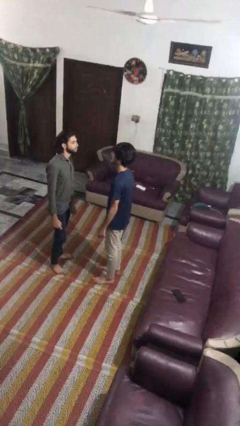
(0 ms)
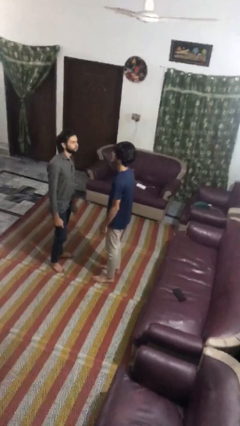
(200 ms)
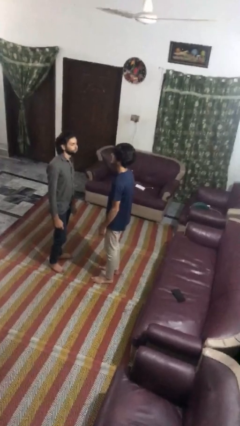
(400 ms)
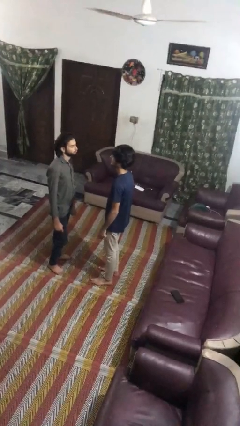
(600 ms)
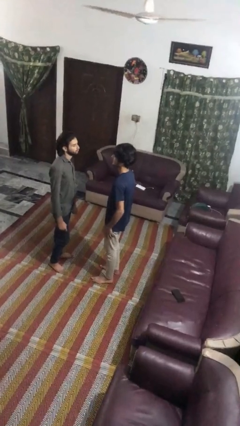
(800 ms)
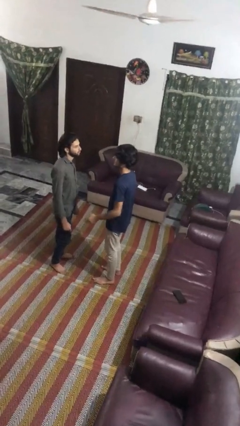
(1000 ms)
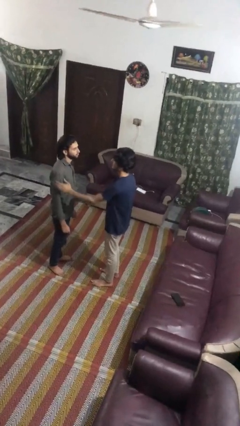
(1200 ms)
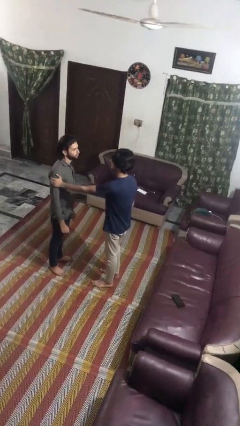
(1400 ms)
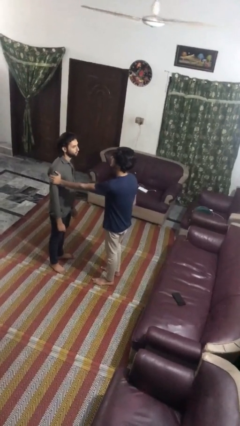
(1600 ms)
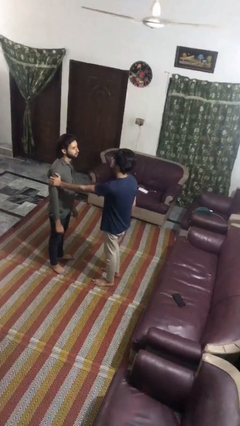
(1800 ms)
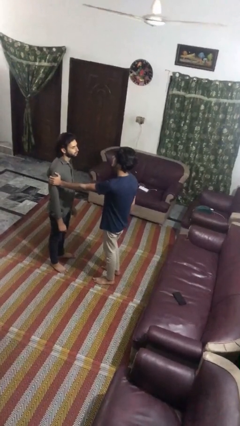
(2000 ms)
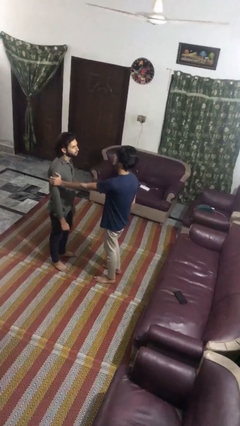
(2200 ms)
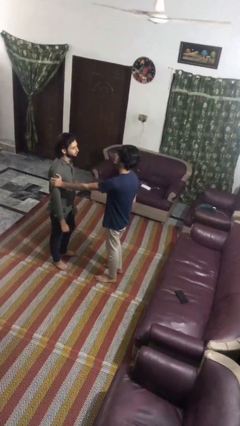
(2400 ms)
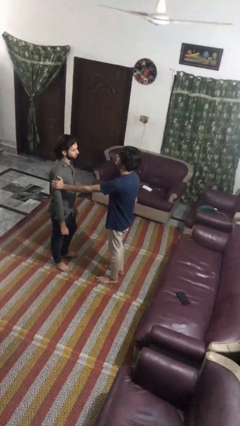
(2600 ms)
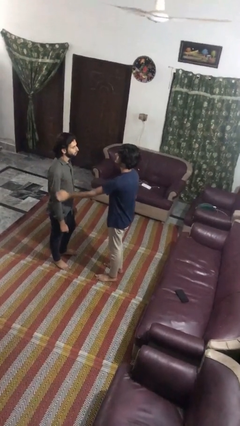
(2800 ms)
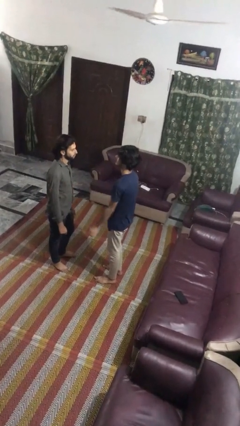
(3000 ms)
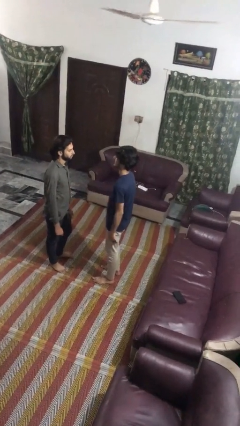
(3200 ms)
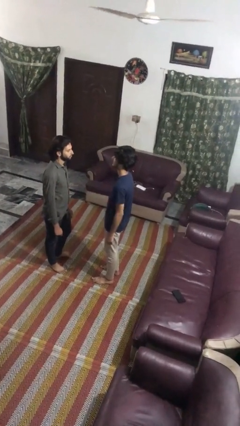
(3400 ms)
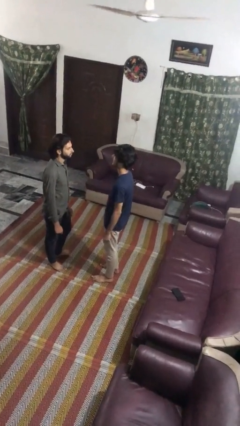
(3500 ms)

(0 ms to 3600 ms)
person grabs person by bicep

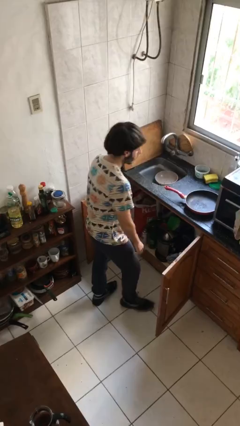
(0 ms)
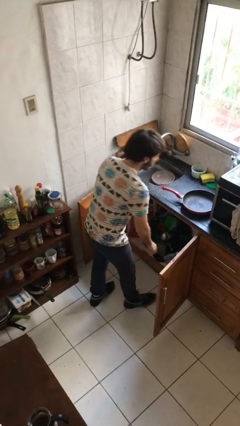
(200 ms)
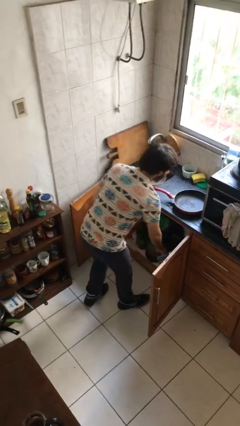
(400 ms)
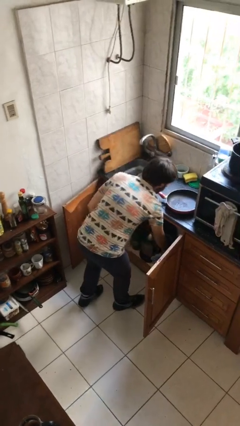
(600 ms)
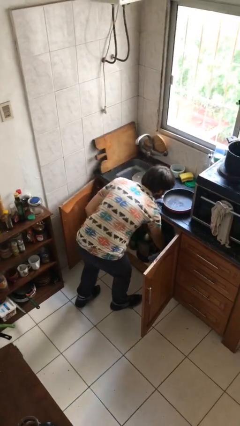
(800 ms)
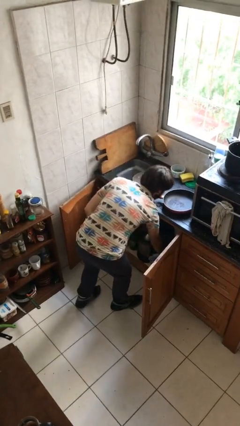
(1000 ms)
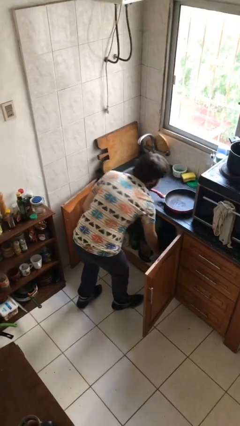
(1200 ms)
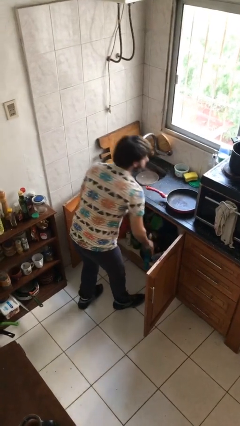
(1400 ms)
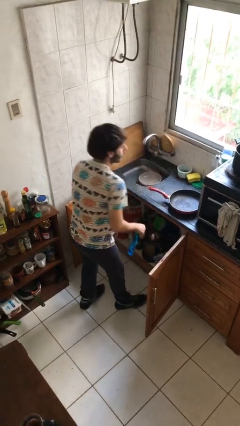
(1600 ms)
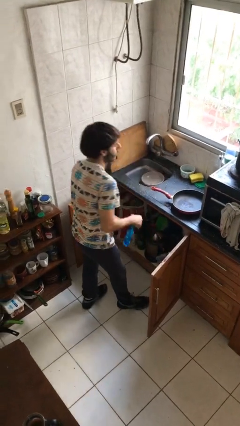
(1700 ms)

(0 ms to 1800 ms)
person picks up object from cabinet

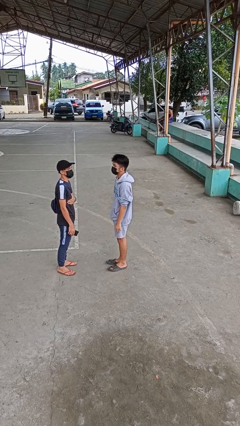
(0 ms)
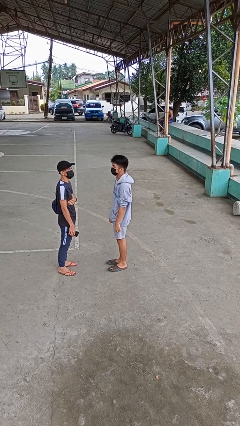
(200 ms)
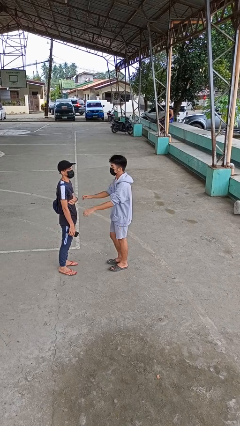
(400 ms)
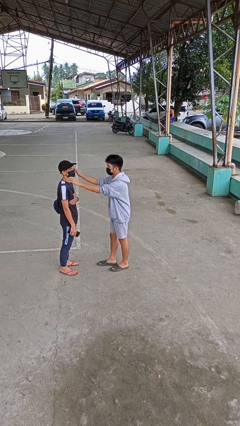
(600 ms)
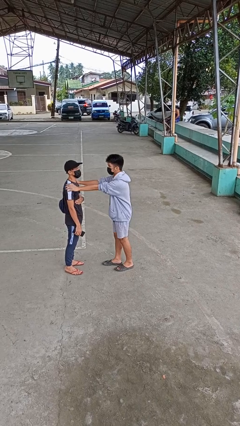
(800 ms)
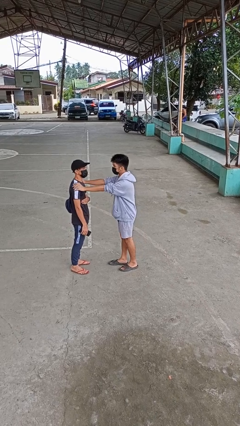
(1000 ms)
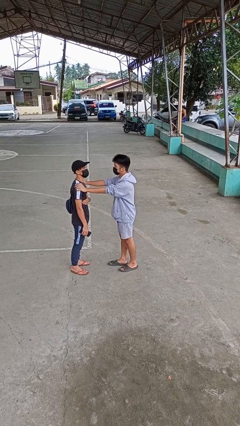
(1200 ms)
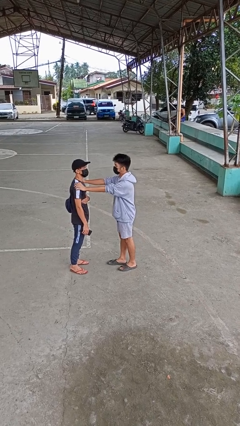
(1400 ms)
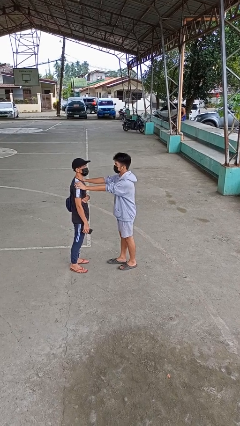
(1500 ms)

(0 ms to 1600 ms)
person grabs person by shoulder

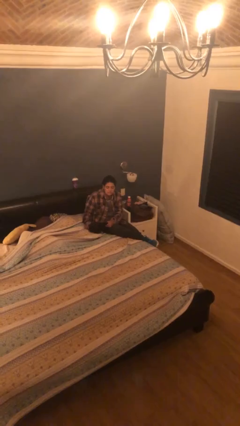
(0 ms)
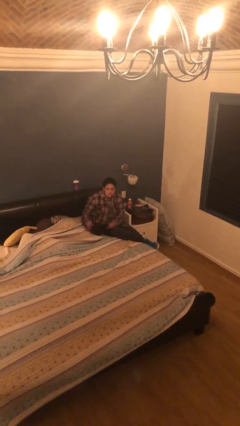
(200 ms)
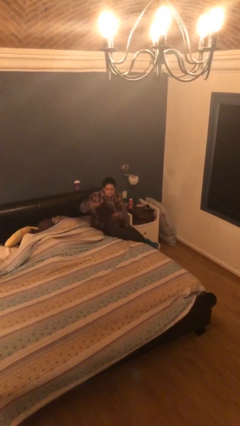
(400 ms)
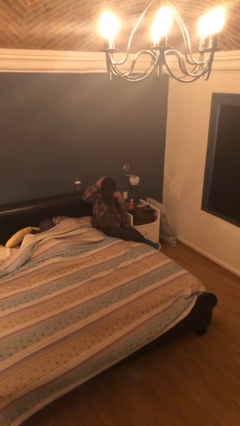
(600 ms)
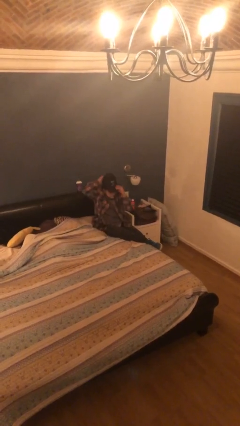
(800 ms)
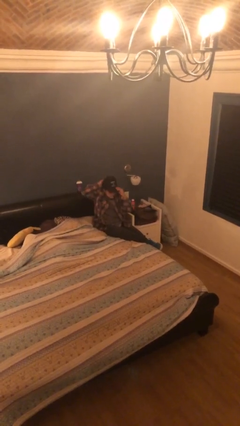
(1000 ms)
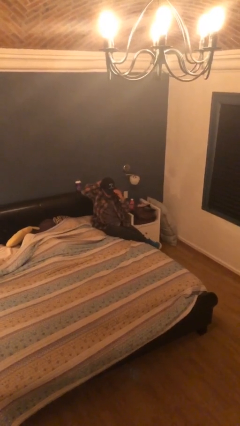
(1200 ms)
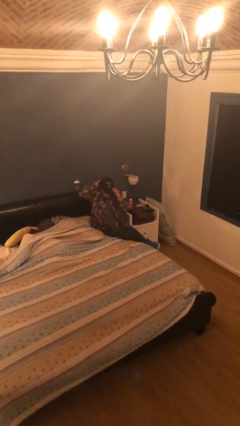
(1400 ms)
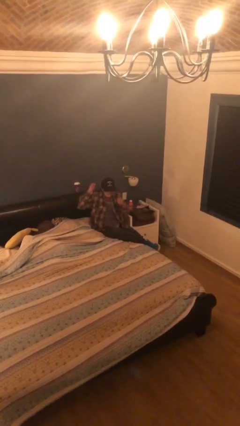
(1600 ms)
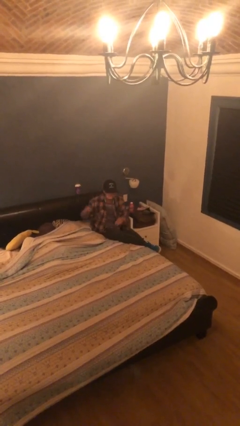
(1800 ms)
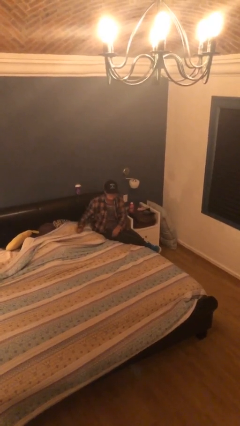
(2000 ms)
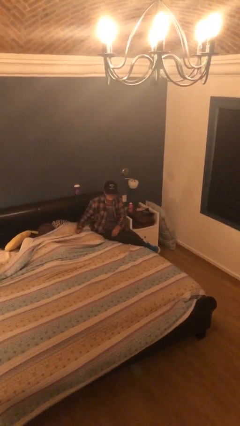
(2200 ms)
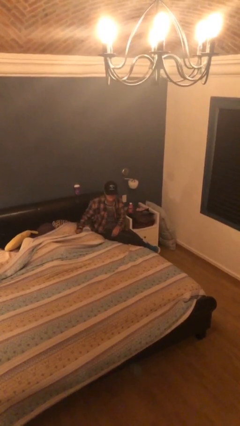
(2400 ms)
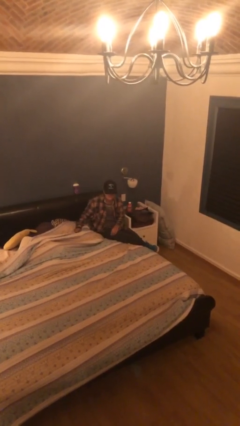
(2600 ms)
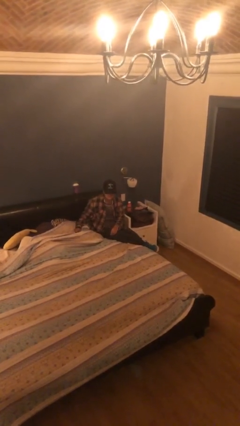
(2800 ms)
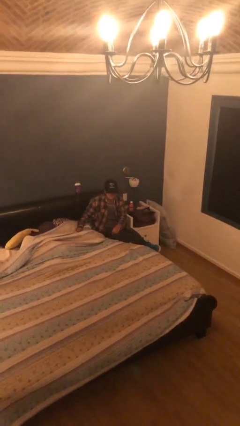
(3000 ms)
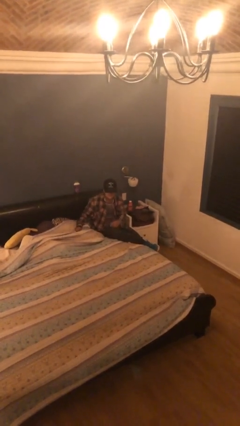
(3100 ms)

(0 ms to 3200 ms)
person puts on hat

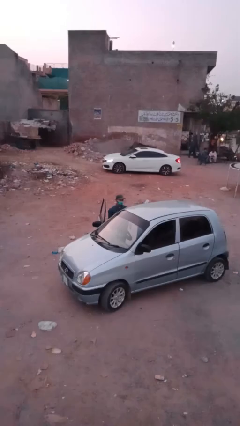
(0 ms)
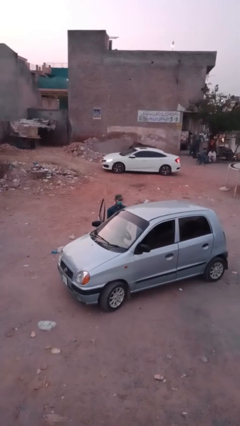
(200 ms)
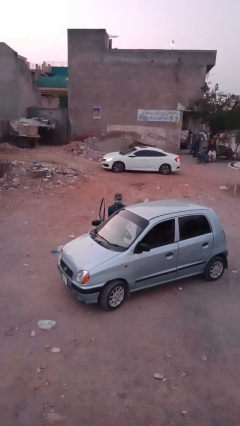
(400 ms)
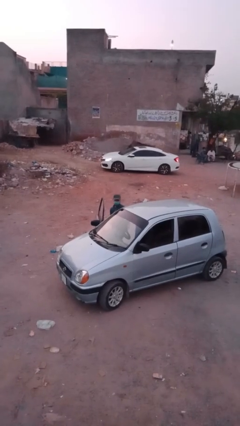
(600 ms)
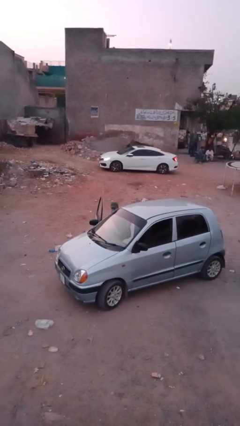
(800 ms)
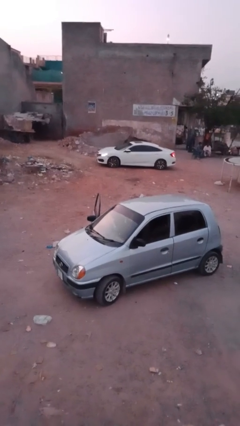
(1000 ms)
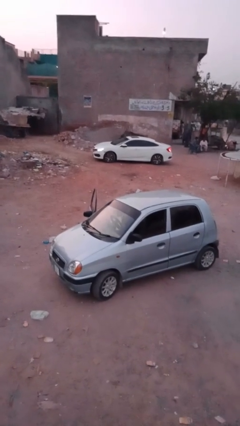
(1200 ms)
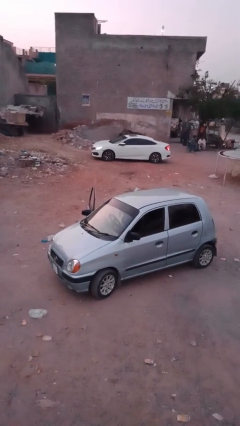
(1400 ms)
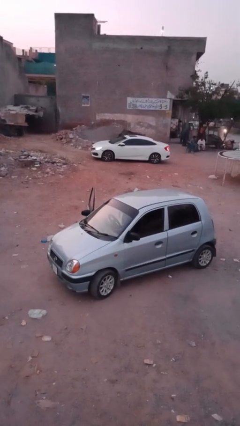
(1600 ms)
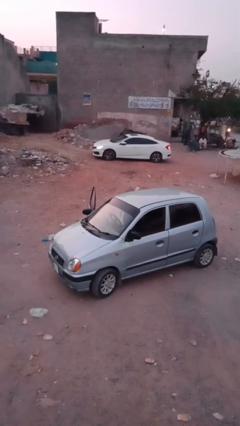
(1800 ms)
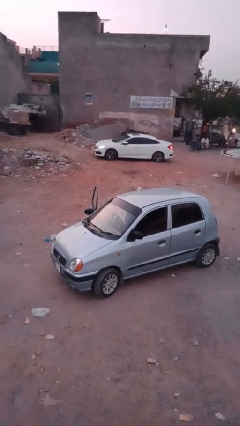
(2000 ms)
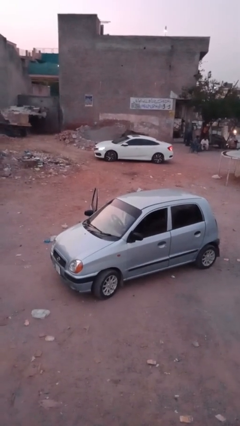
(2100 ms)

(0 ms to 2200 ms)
person enters car

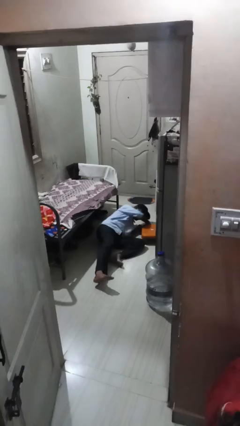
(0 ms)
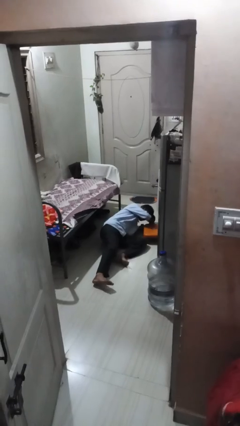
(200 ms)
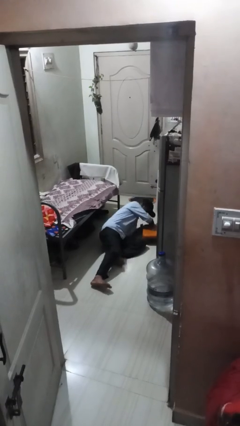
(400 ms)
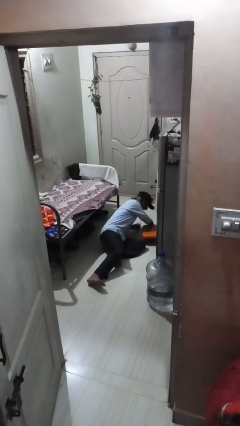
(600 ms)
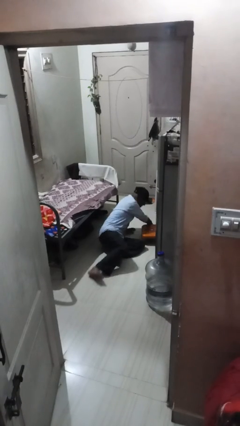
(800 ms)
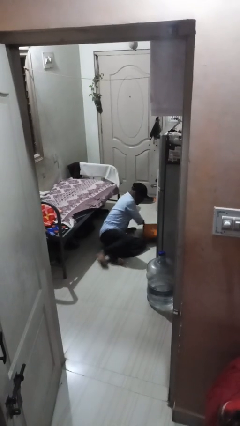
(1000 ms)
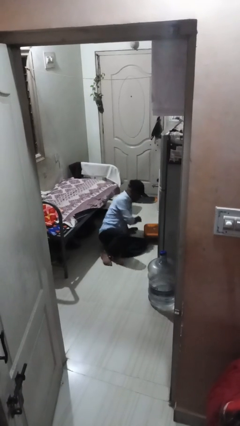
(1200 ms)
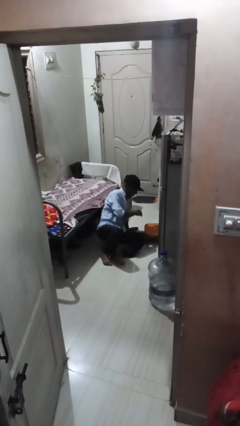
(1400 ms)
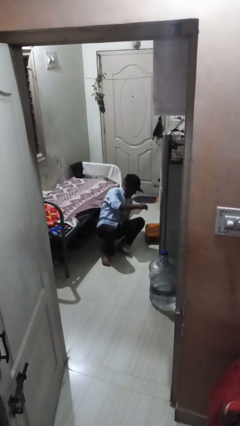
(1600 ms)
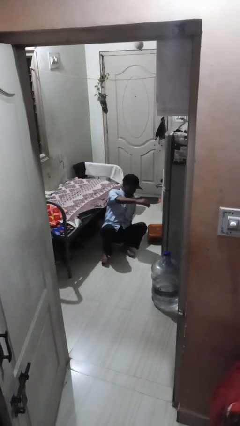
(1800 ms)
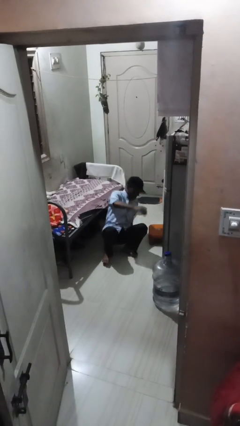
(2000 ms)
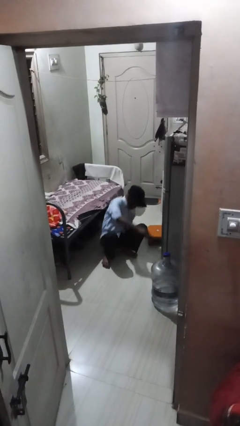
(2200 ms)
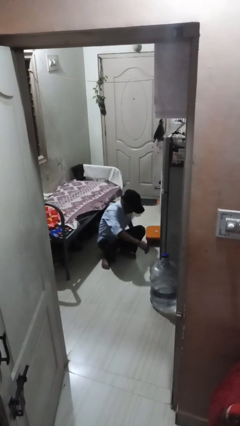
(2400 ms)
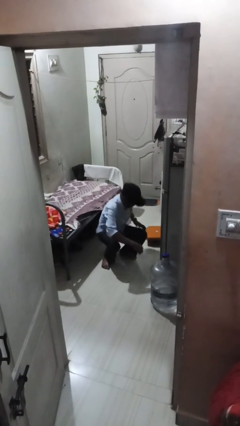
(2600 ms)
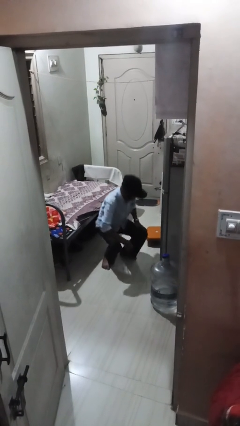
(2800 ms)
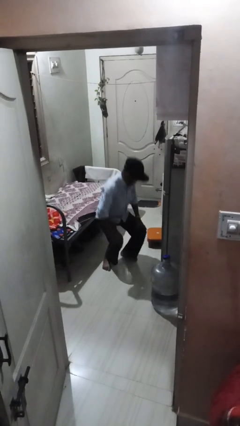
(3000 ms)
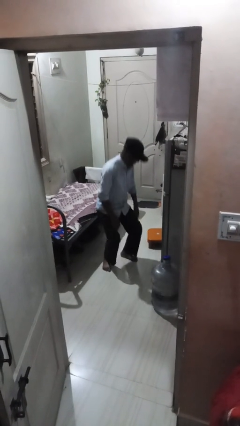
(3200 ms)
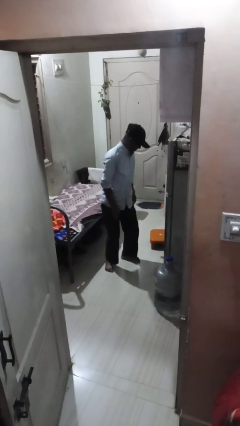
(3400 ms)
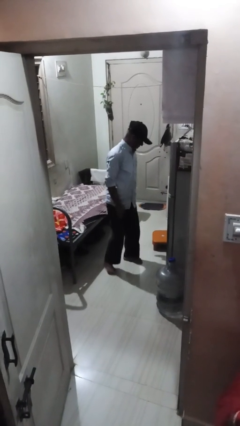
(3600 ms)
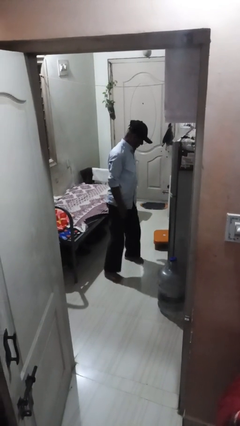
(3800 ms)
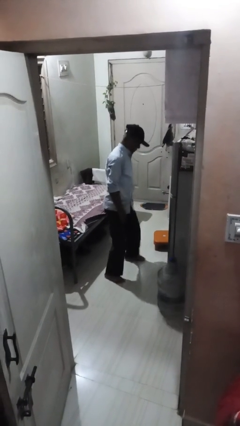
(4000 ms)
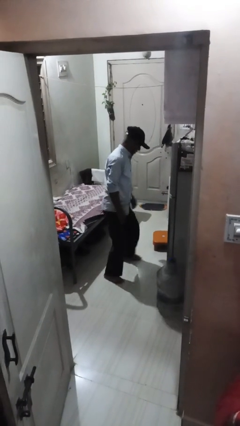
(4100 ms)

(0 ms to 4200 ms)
person stands up from floor

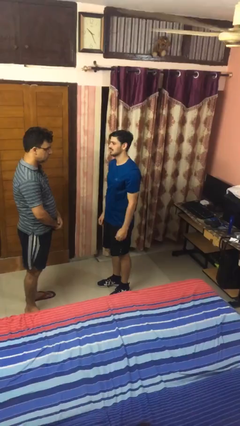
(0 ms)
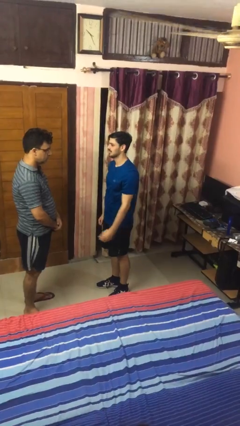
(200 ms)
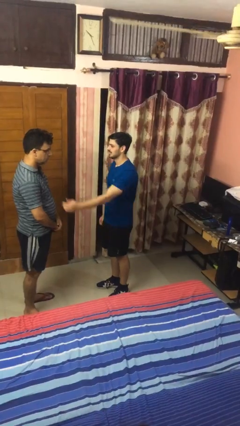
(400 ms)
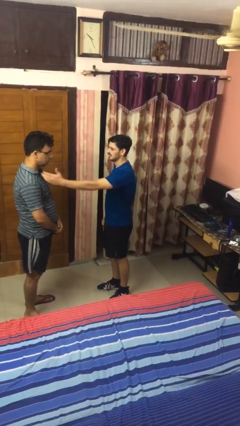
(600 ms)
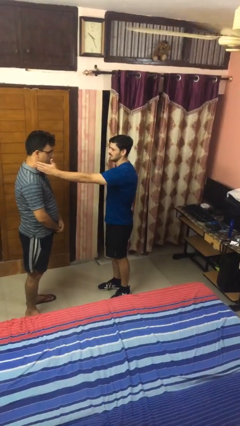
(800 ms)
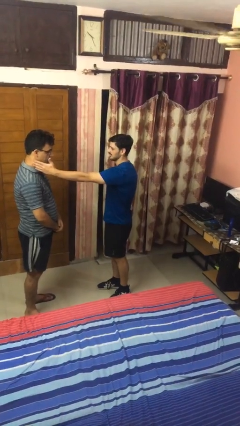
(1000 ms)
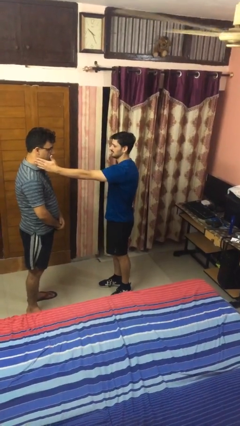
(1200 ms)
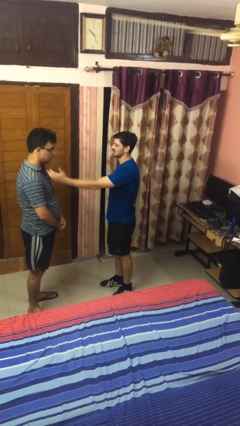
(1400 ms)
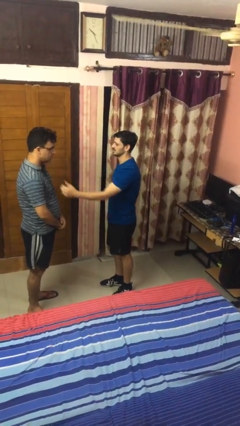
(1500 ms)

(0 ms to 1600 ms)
person touches face of person
